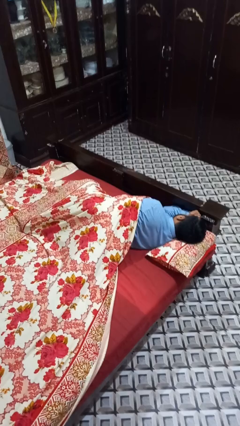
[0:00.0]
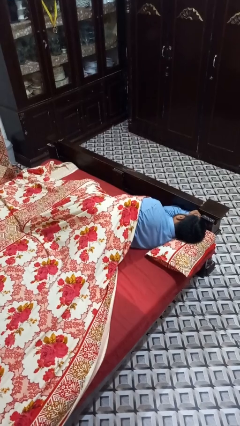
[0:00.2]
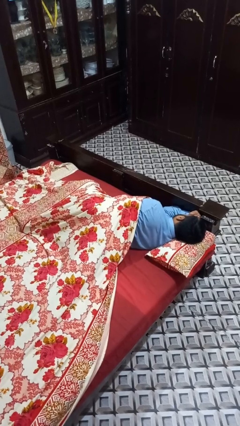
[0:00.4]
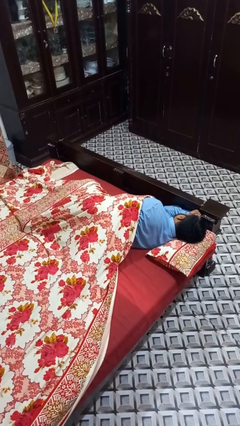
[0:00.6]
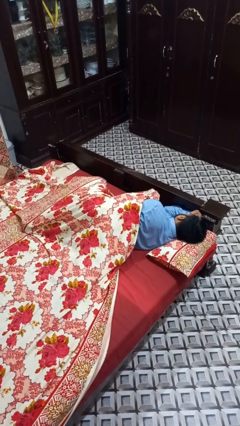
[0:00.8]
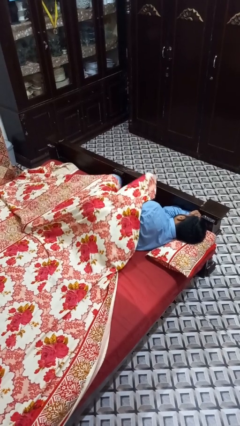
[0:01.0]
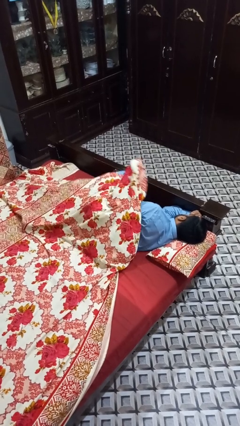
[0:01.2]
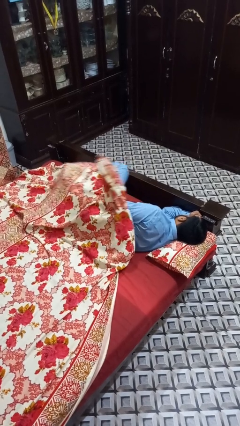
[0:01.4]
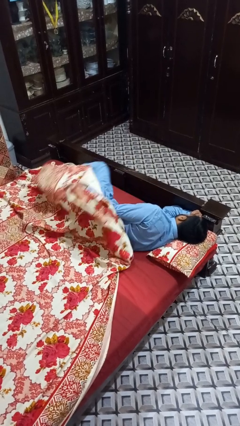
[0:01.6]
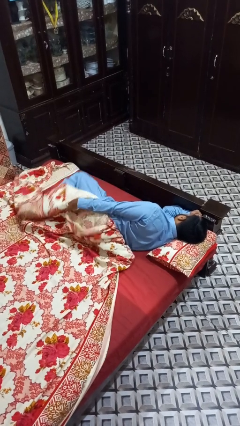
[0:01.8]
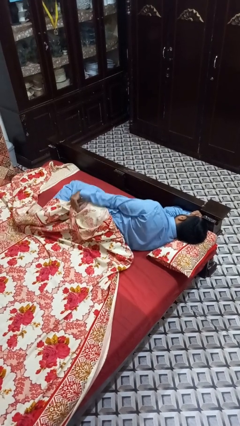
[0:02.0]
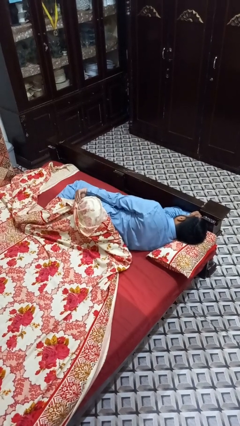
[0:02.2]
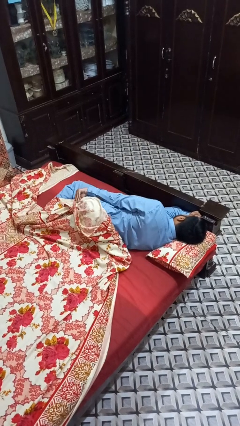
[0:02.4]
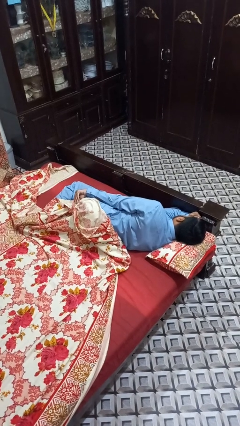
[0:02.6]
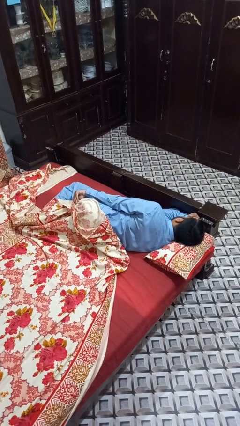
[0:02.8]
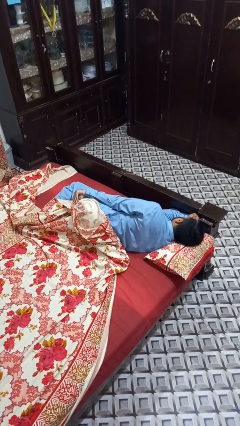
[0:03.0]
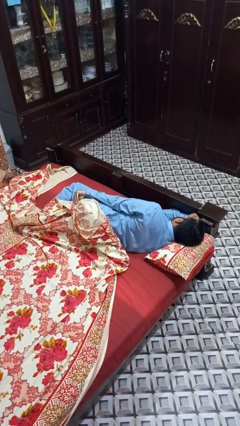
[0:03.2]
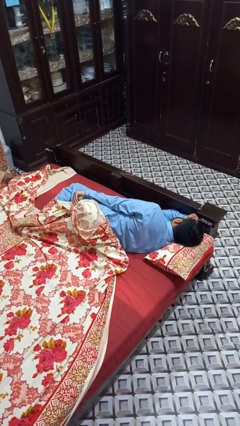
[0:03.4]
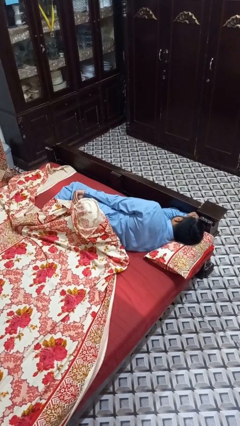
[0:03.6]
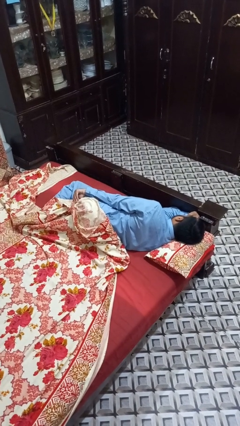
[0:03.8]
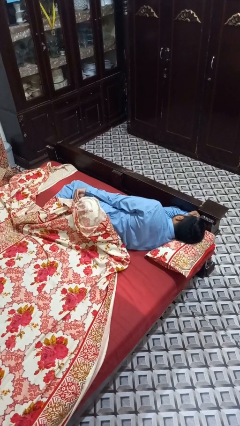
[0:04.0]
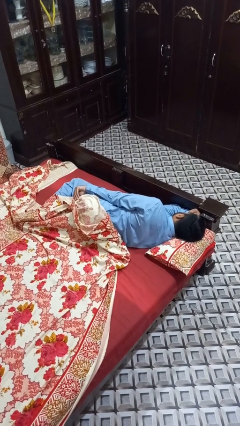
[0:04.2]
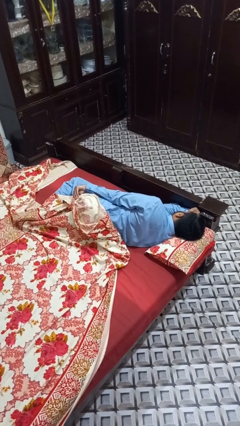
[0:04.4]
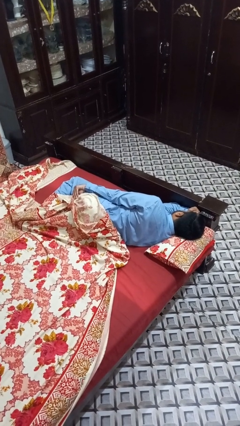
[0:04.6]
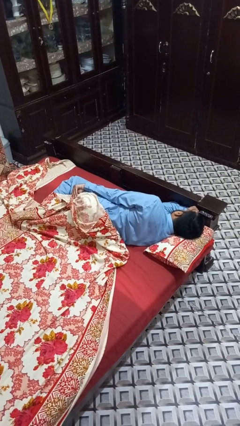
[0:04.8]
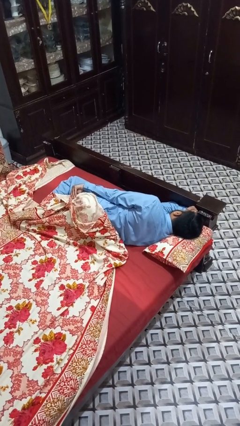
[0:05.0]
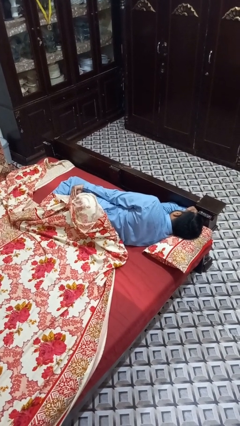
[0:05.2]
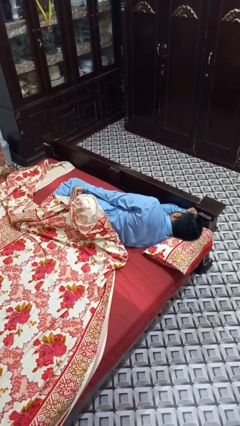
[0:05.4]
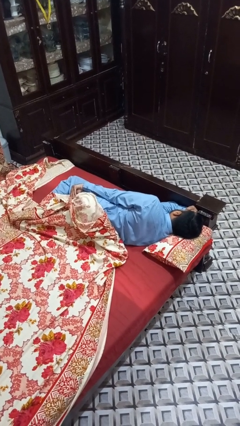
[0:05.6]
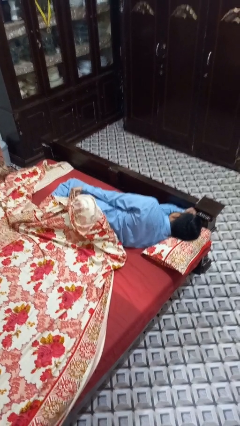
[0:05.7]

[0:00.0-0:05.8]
person uncovers with bedsheets

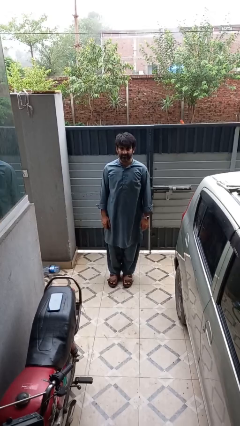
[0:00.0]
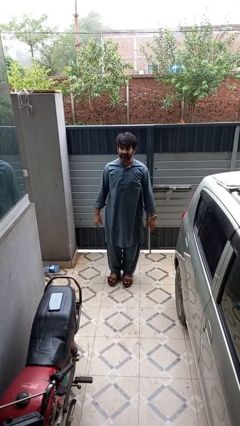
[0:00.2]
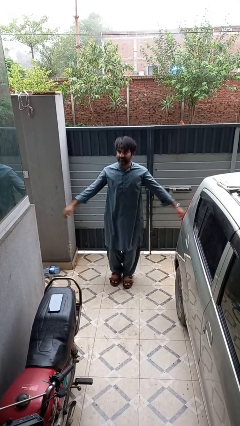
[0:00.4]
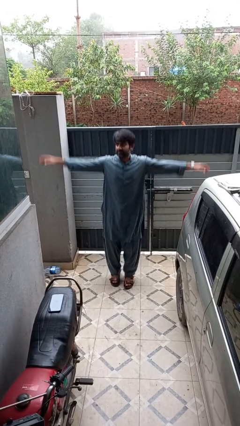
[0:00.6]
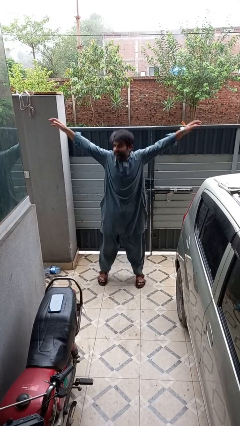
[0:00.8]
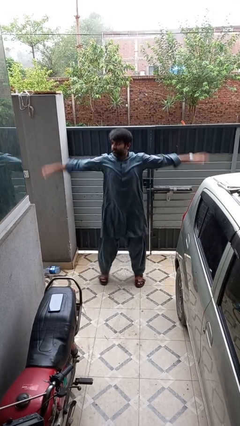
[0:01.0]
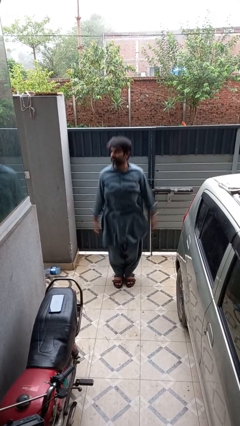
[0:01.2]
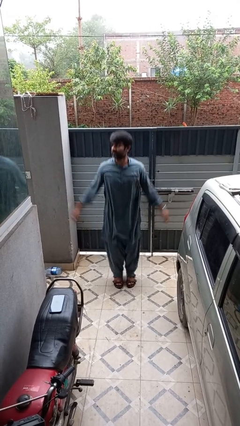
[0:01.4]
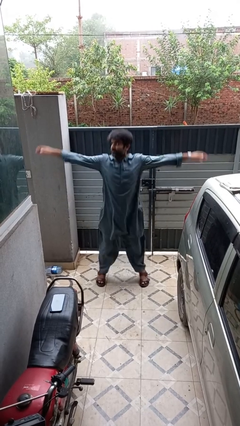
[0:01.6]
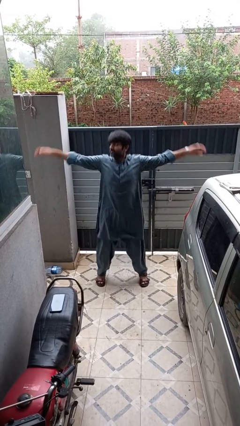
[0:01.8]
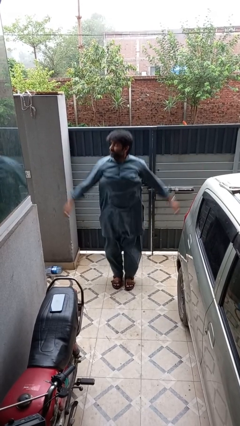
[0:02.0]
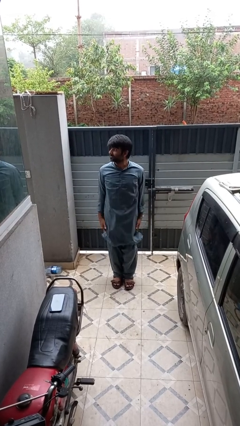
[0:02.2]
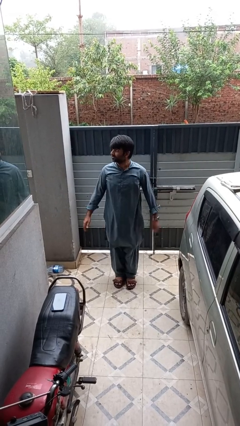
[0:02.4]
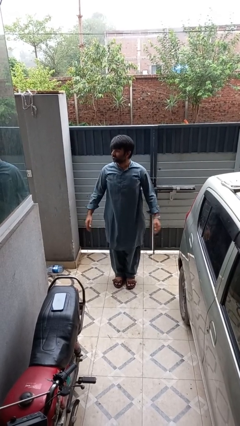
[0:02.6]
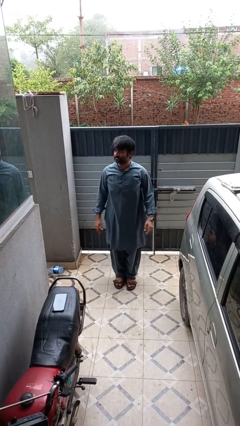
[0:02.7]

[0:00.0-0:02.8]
person exercises with jumping jacks

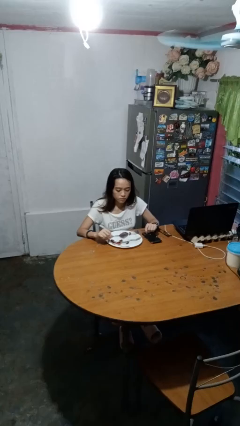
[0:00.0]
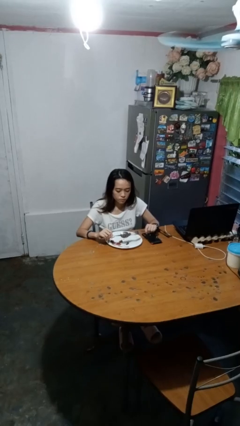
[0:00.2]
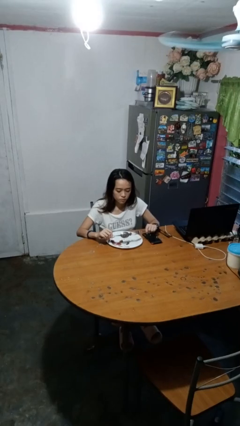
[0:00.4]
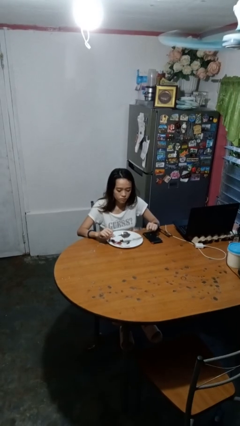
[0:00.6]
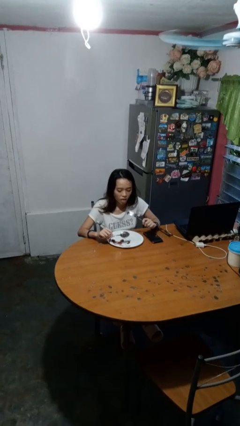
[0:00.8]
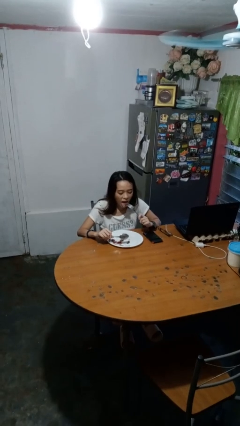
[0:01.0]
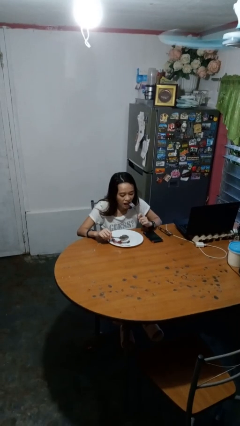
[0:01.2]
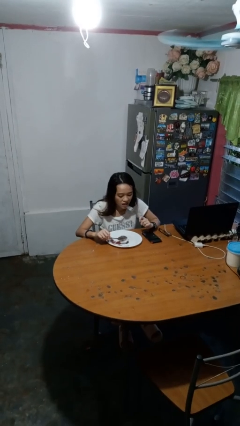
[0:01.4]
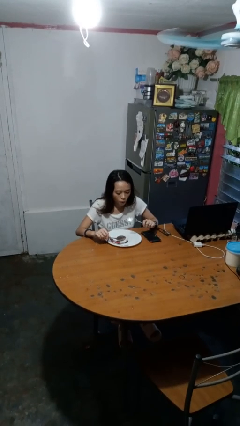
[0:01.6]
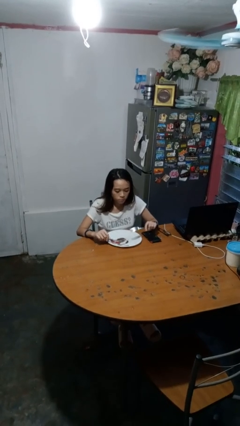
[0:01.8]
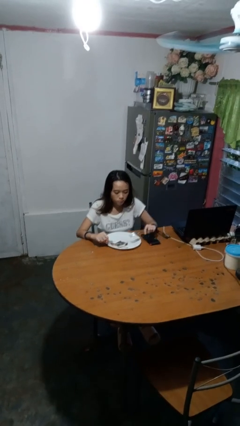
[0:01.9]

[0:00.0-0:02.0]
person eats with utensil

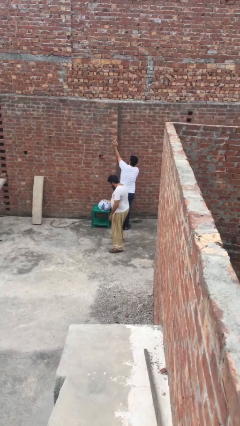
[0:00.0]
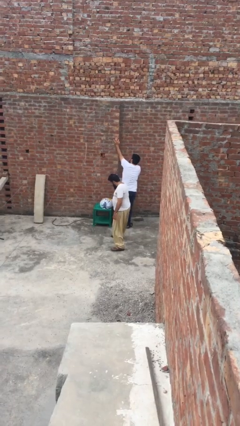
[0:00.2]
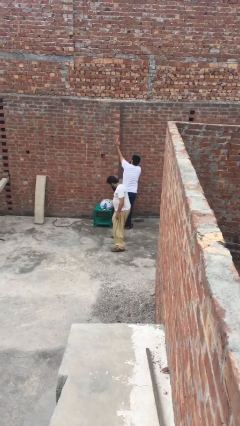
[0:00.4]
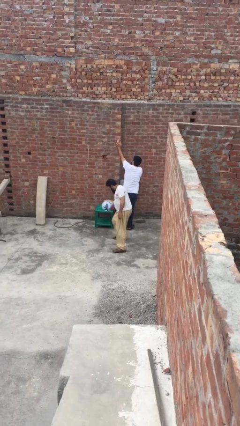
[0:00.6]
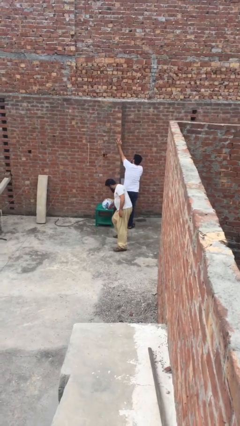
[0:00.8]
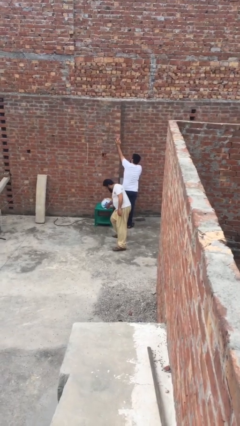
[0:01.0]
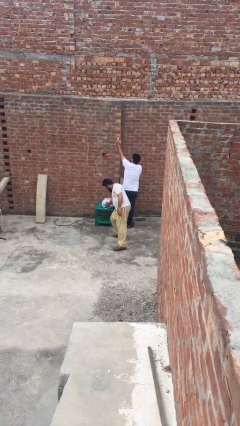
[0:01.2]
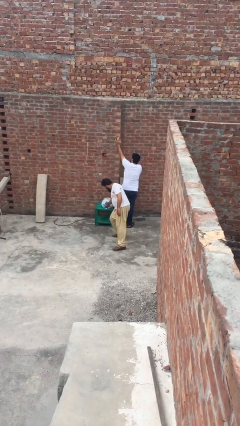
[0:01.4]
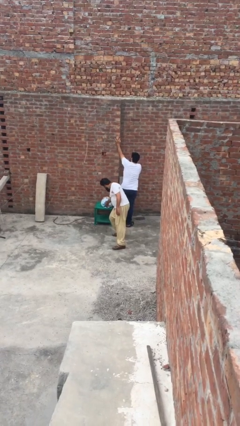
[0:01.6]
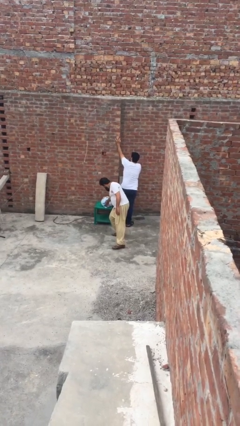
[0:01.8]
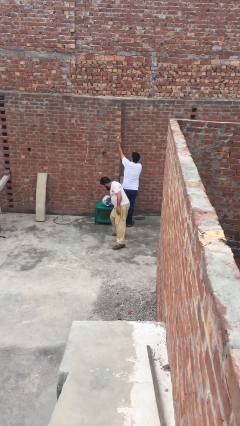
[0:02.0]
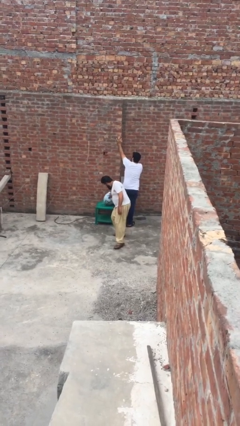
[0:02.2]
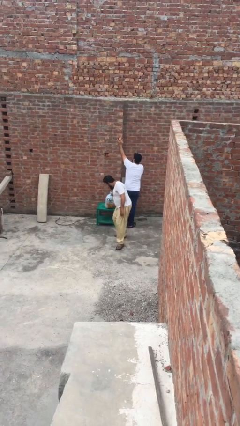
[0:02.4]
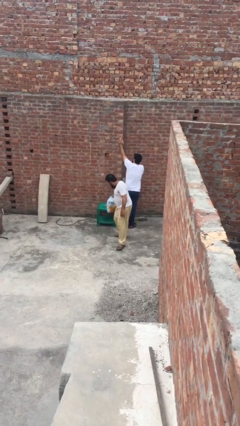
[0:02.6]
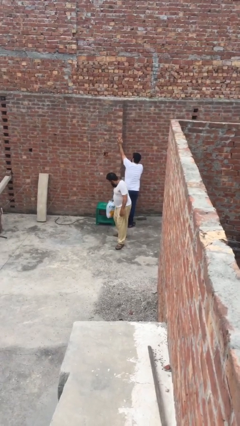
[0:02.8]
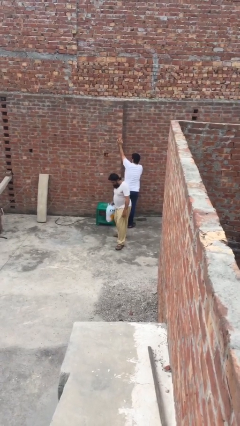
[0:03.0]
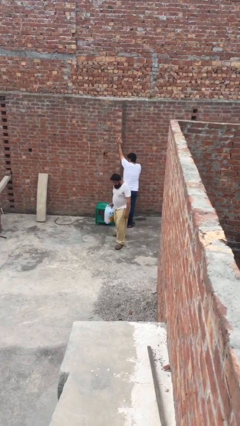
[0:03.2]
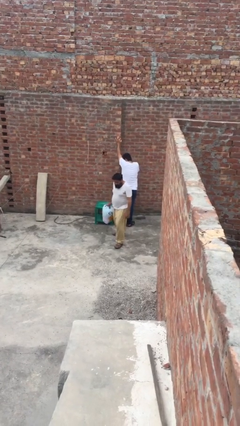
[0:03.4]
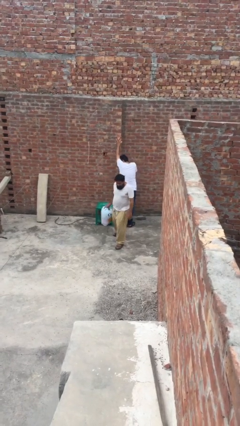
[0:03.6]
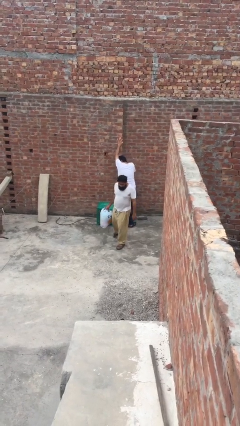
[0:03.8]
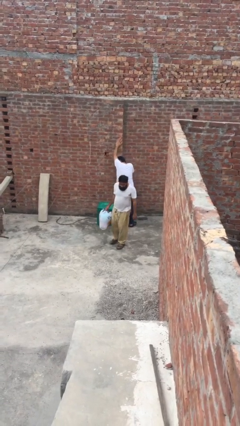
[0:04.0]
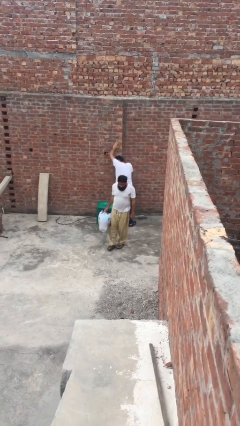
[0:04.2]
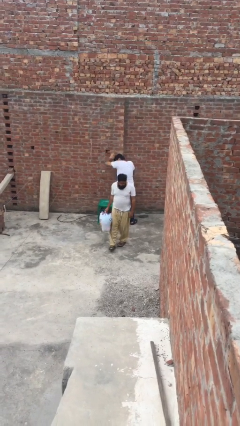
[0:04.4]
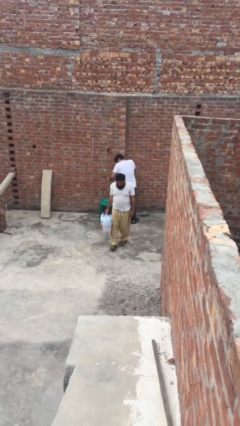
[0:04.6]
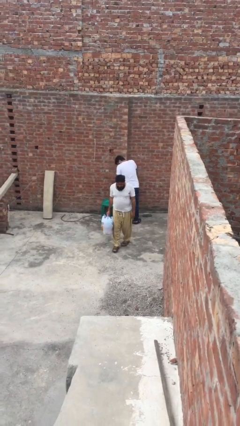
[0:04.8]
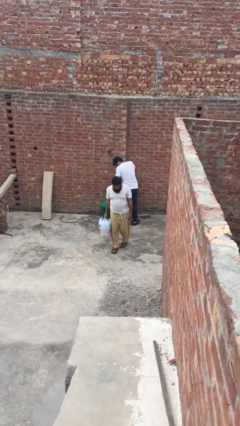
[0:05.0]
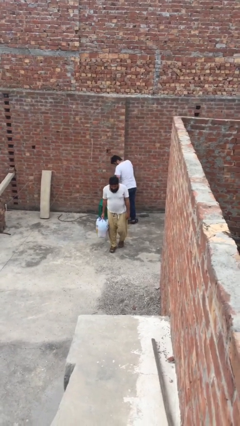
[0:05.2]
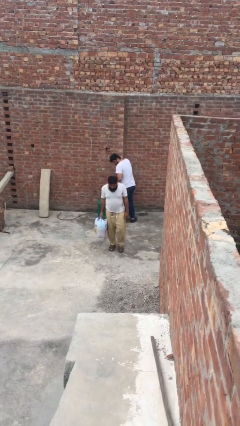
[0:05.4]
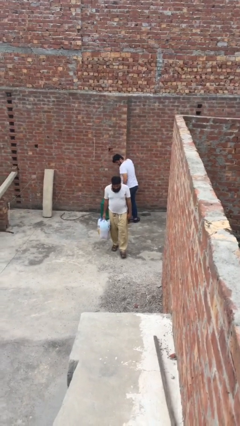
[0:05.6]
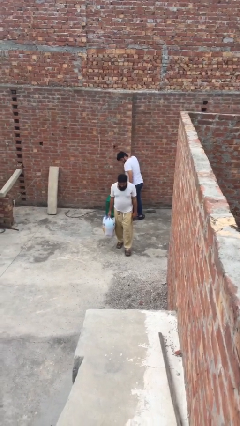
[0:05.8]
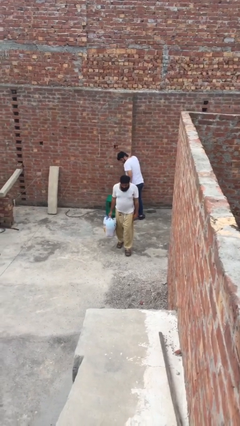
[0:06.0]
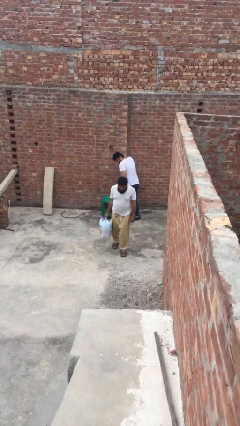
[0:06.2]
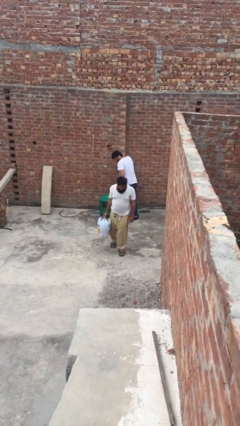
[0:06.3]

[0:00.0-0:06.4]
person steals object from person

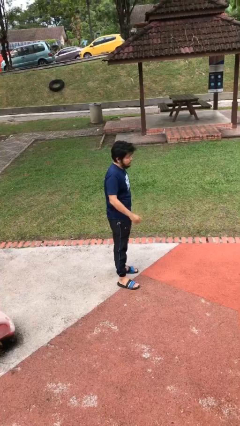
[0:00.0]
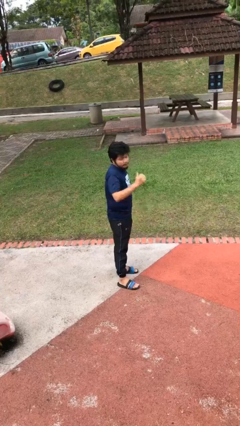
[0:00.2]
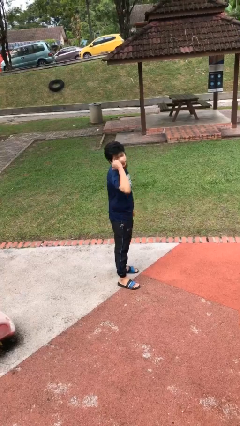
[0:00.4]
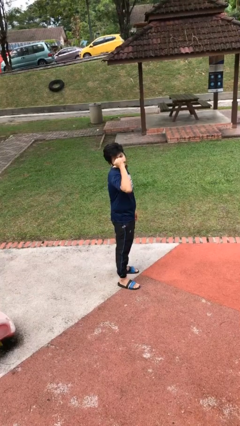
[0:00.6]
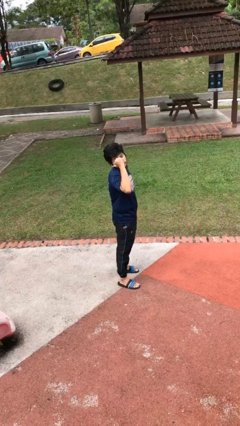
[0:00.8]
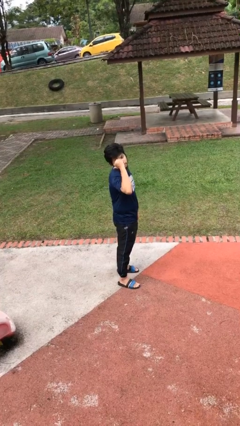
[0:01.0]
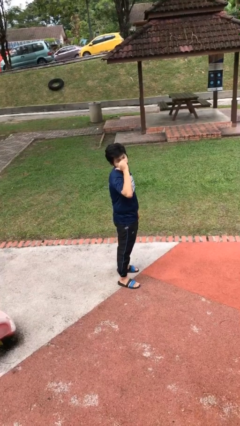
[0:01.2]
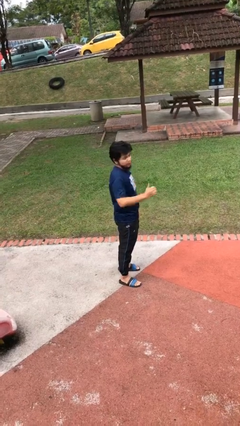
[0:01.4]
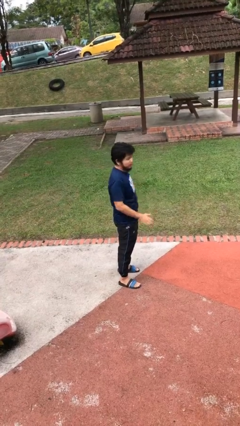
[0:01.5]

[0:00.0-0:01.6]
person gestures behind me
